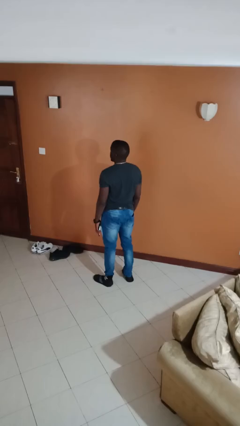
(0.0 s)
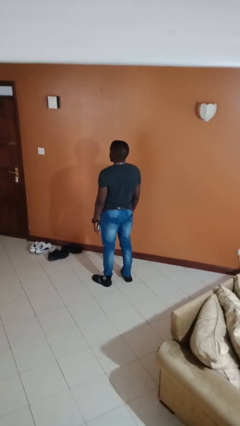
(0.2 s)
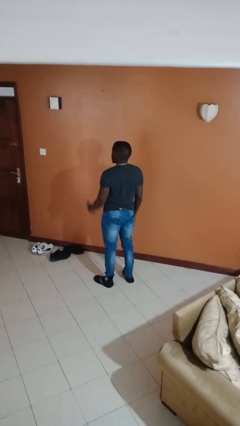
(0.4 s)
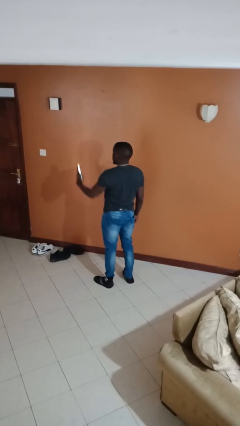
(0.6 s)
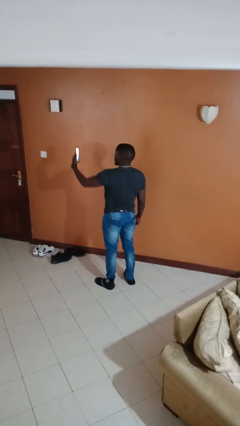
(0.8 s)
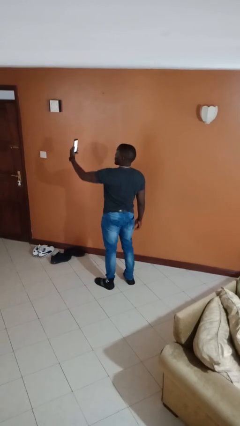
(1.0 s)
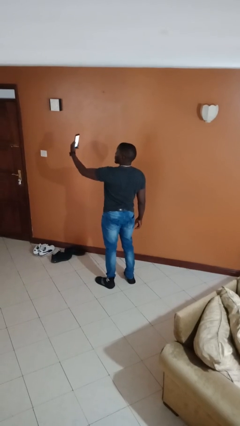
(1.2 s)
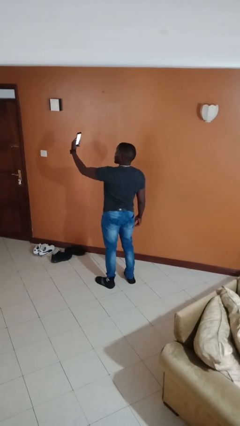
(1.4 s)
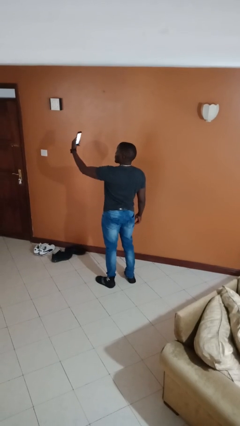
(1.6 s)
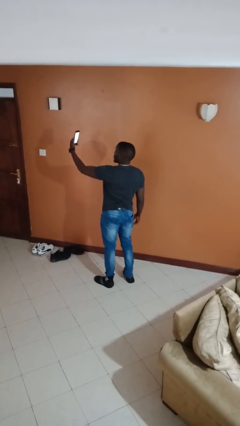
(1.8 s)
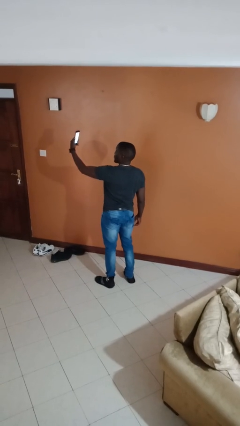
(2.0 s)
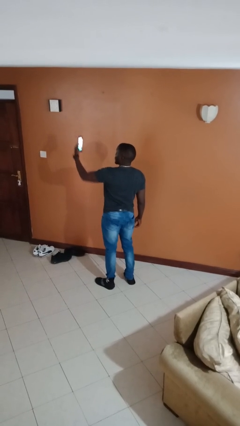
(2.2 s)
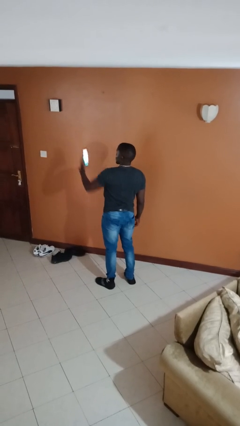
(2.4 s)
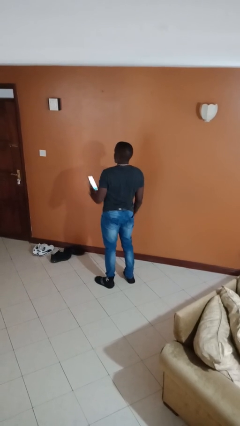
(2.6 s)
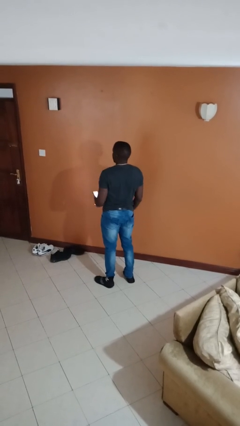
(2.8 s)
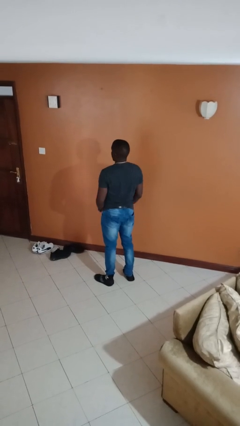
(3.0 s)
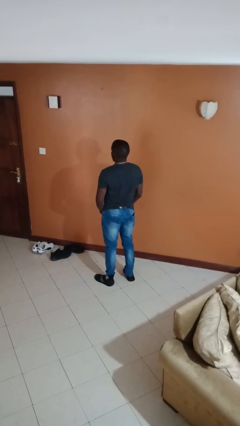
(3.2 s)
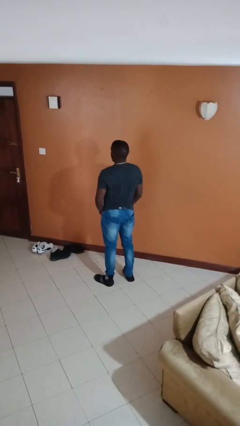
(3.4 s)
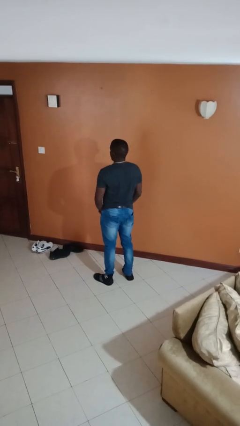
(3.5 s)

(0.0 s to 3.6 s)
person takes selfie

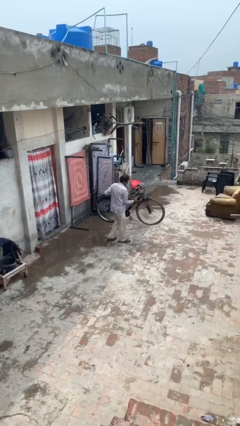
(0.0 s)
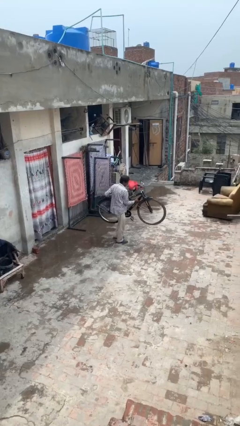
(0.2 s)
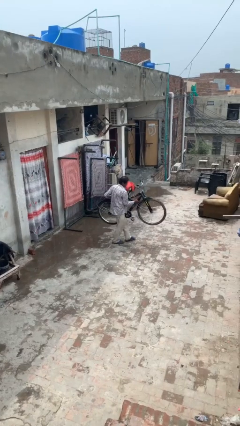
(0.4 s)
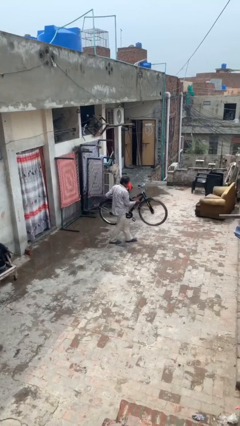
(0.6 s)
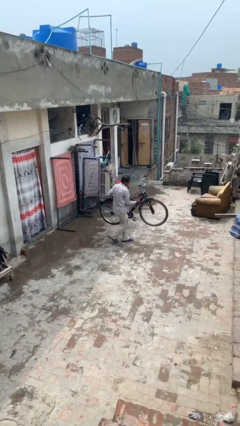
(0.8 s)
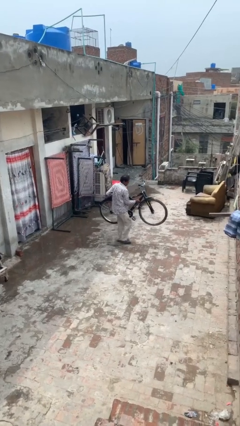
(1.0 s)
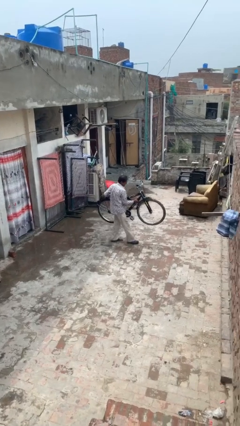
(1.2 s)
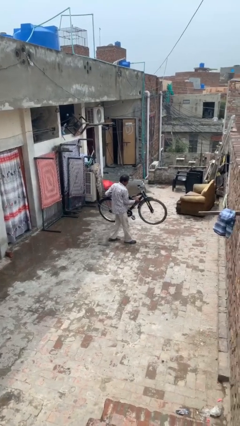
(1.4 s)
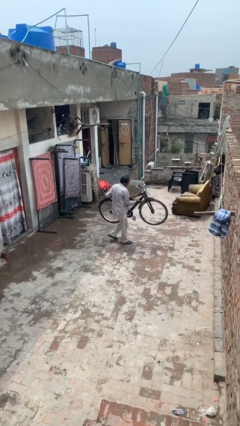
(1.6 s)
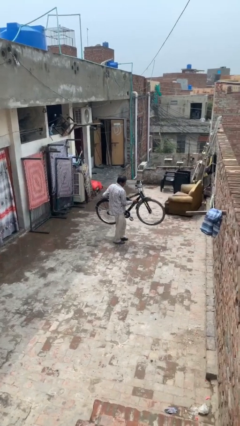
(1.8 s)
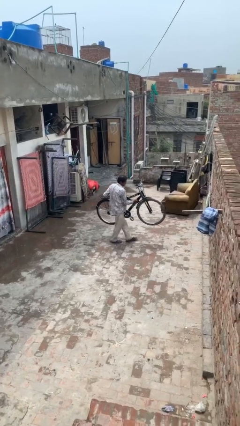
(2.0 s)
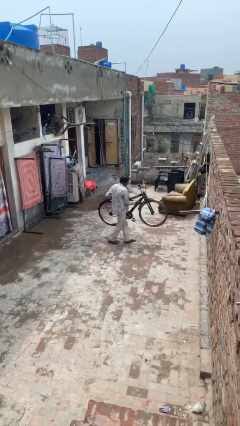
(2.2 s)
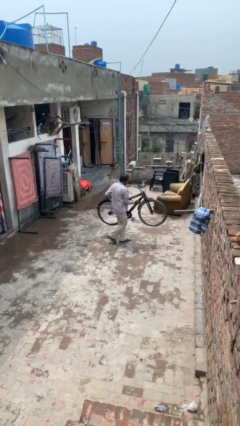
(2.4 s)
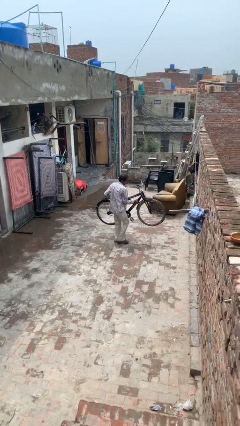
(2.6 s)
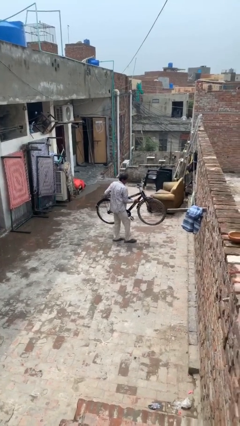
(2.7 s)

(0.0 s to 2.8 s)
person carries heavy object

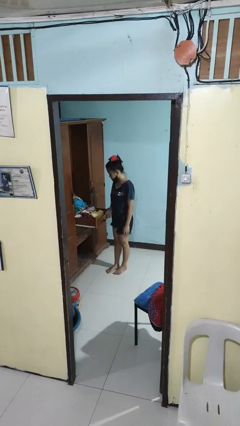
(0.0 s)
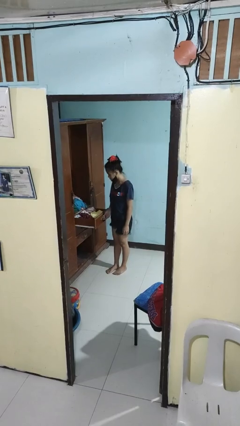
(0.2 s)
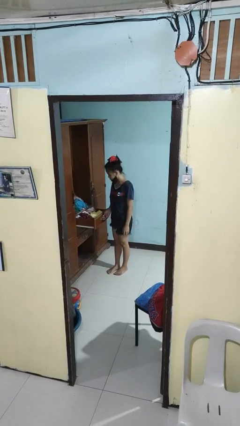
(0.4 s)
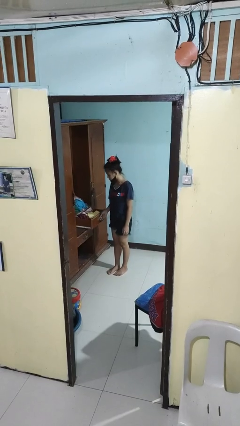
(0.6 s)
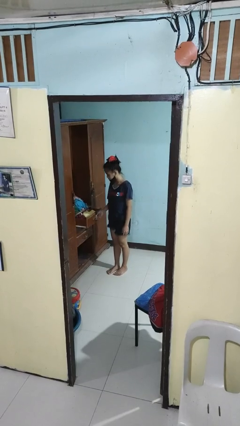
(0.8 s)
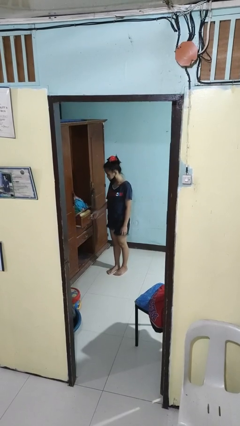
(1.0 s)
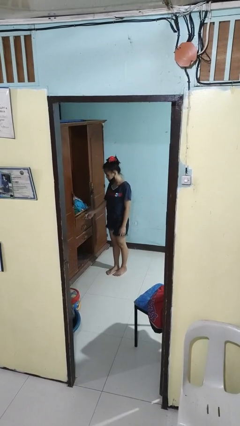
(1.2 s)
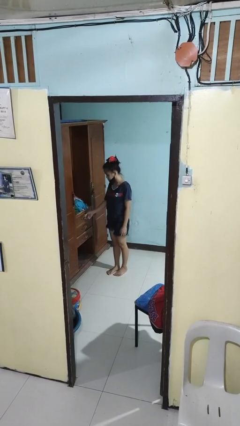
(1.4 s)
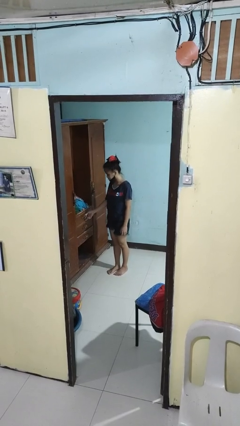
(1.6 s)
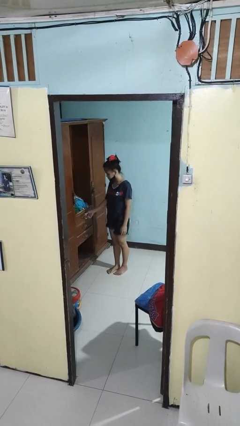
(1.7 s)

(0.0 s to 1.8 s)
person closes dresser drawer

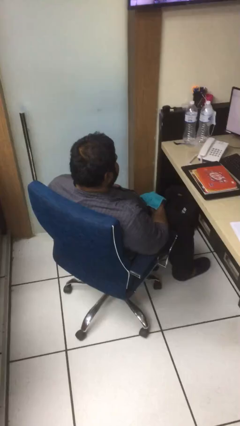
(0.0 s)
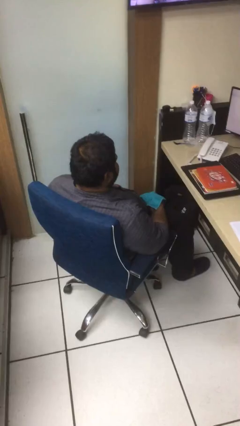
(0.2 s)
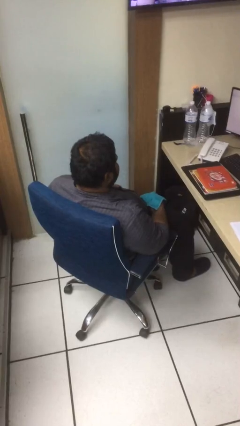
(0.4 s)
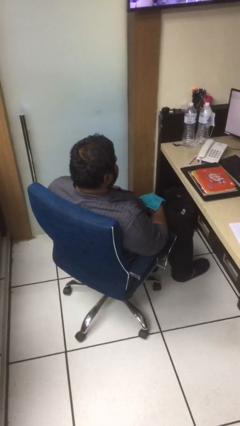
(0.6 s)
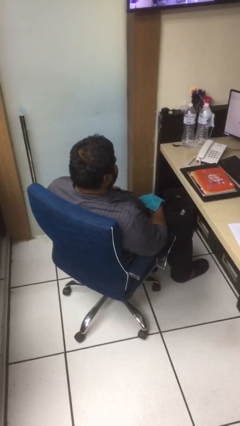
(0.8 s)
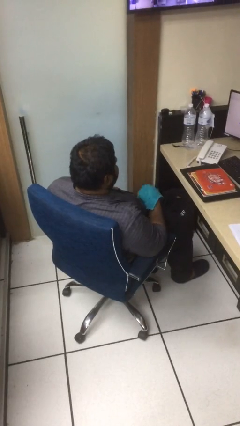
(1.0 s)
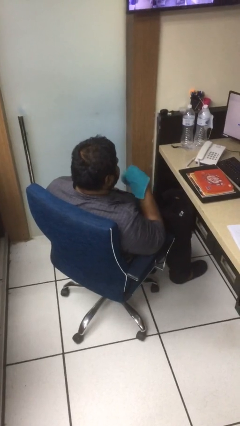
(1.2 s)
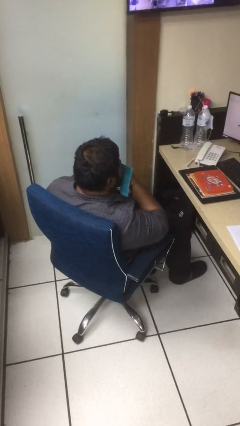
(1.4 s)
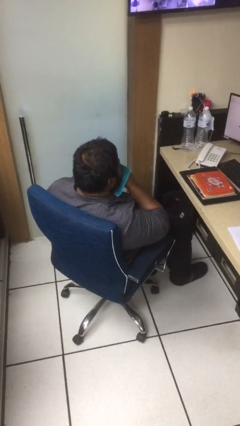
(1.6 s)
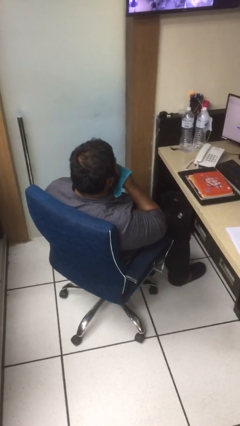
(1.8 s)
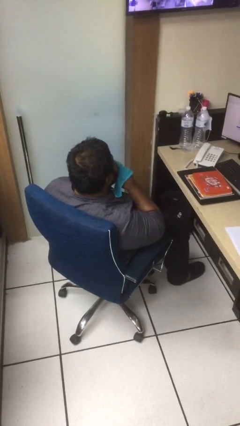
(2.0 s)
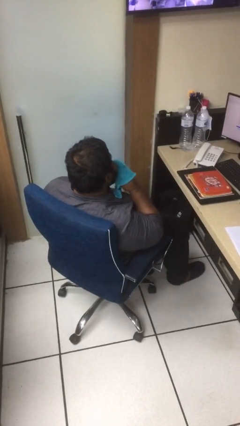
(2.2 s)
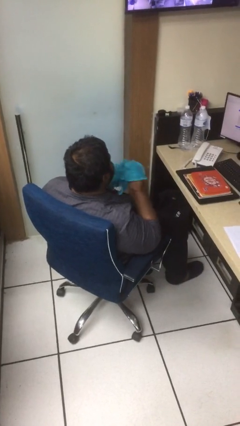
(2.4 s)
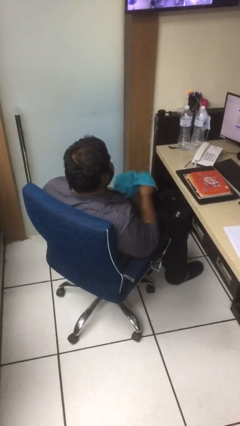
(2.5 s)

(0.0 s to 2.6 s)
person wipes mouth with napkin

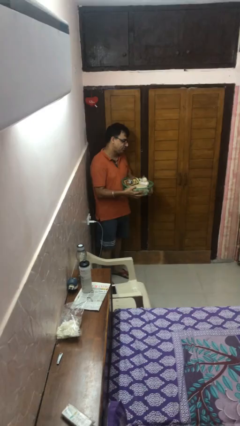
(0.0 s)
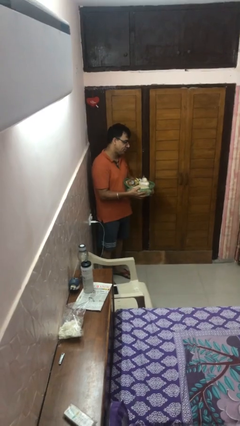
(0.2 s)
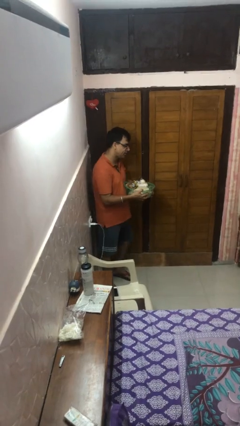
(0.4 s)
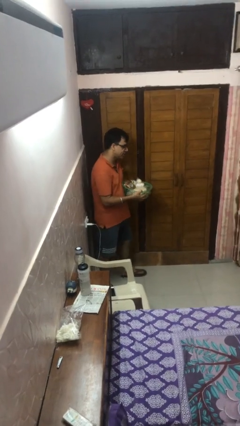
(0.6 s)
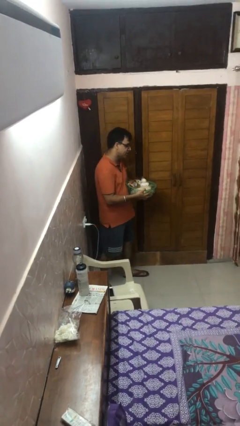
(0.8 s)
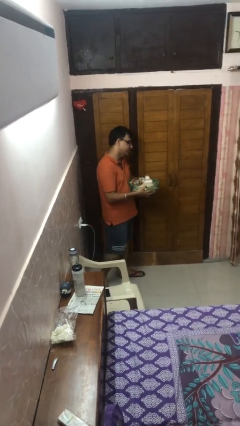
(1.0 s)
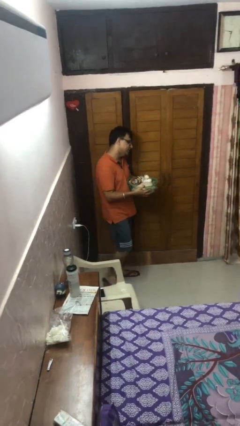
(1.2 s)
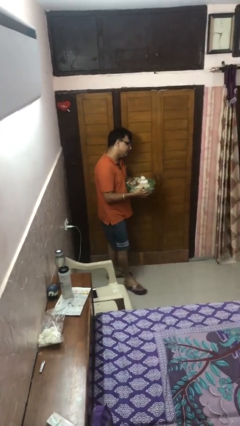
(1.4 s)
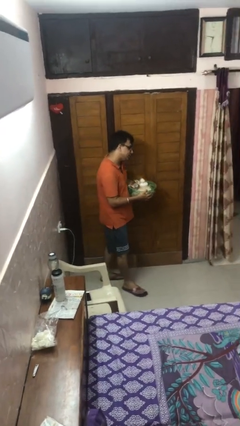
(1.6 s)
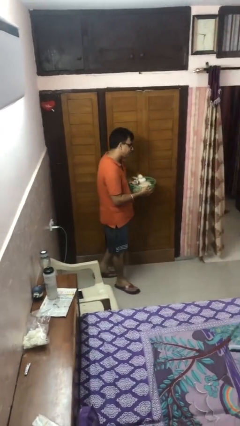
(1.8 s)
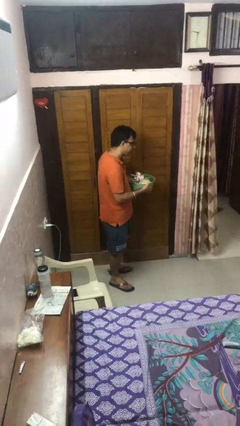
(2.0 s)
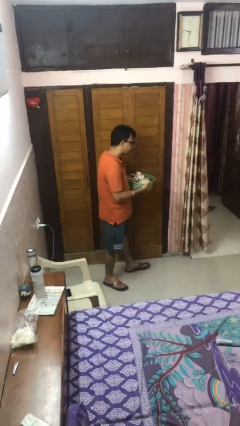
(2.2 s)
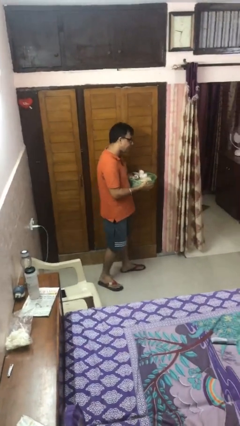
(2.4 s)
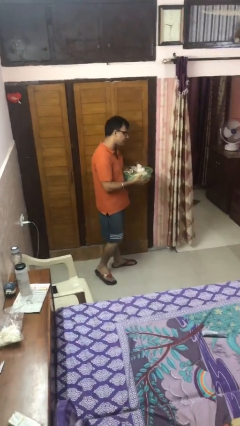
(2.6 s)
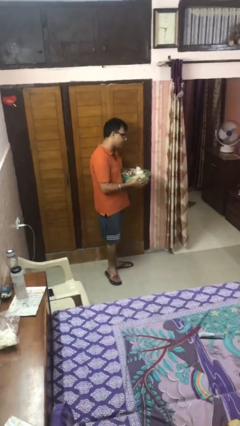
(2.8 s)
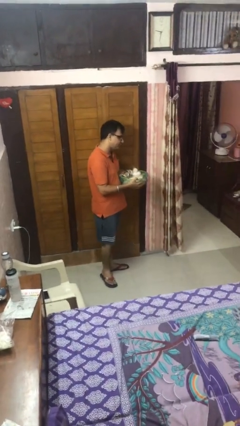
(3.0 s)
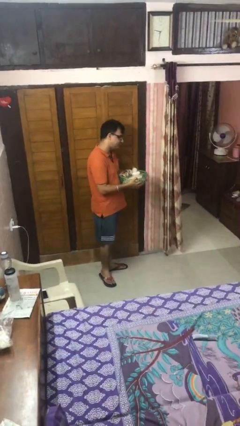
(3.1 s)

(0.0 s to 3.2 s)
person carries groceries

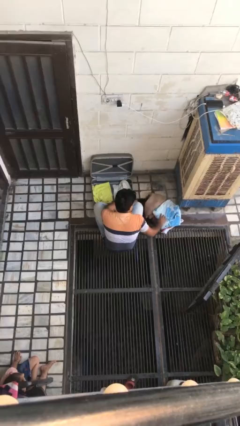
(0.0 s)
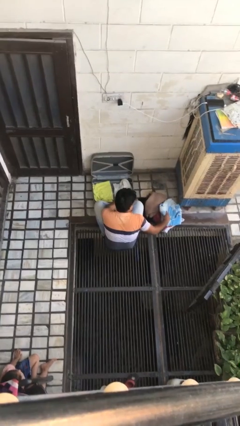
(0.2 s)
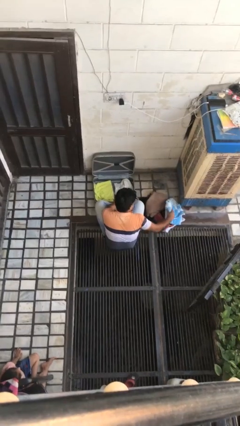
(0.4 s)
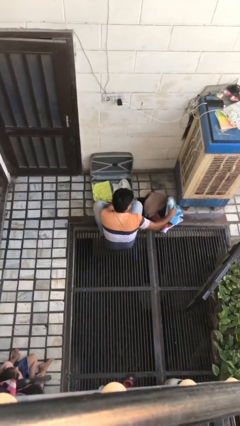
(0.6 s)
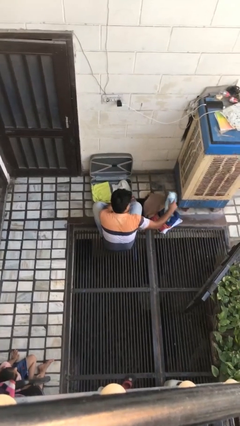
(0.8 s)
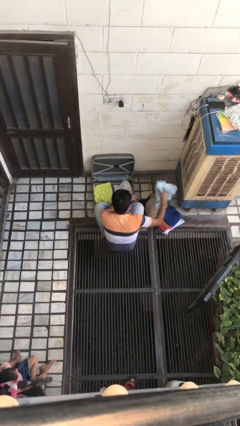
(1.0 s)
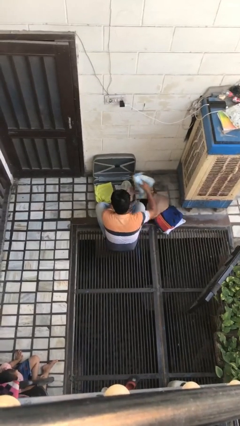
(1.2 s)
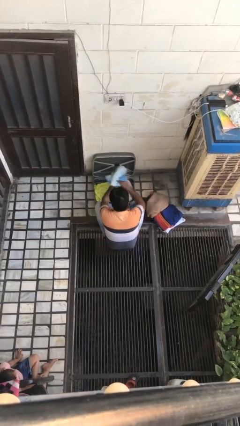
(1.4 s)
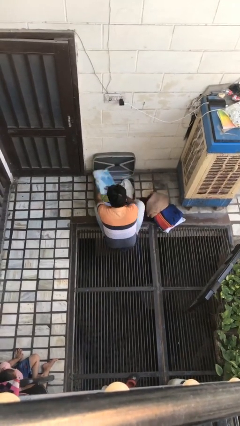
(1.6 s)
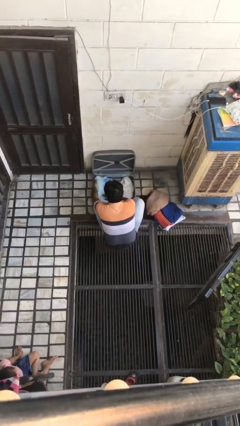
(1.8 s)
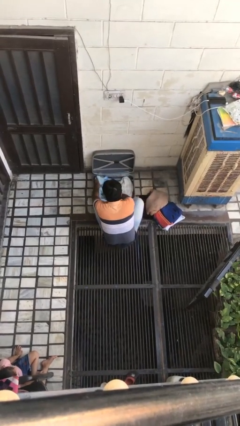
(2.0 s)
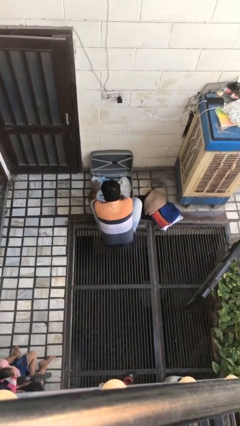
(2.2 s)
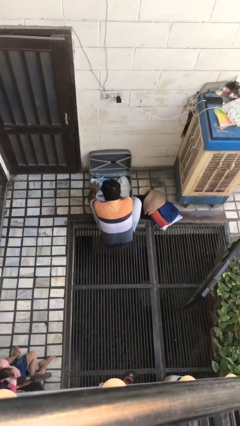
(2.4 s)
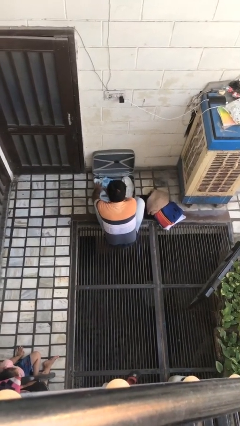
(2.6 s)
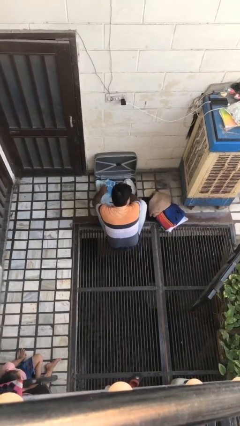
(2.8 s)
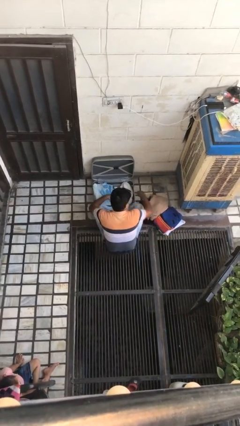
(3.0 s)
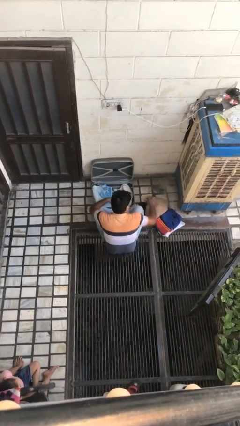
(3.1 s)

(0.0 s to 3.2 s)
person loads clothes into suitcase
